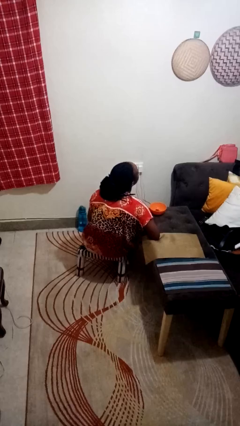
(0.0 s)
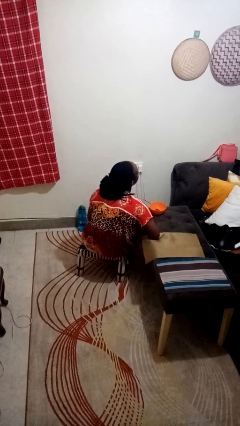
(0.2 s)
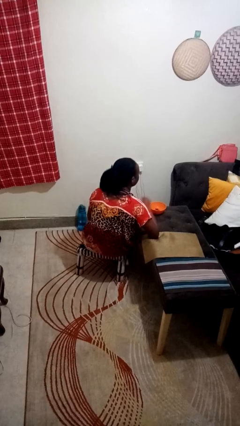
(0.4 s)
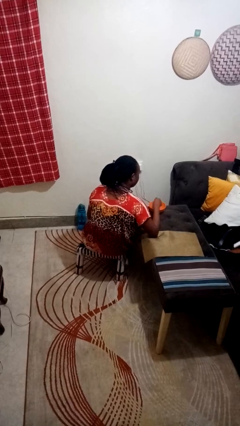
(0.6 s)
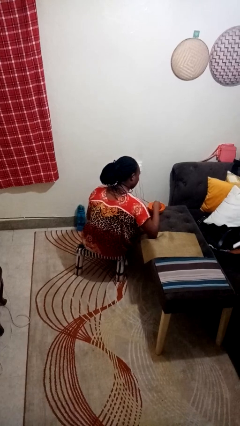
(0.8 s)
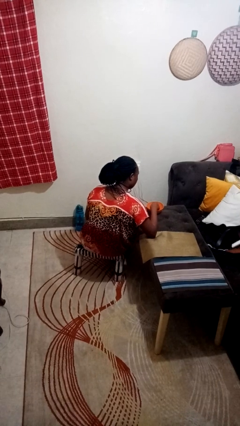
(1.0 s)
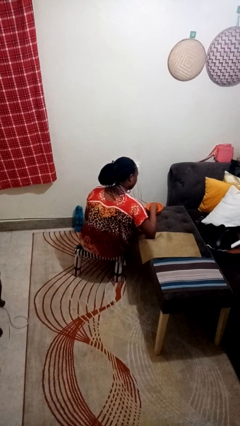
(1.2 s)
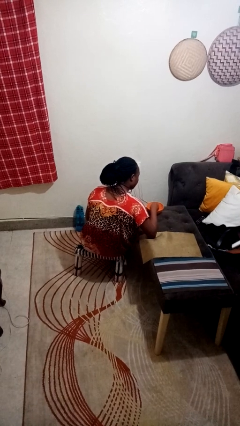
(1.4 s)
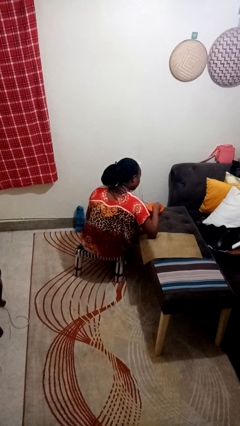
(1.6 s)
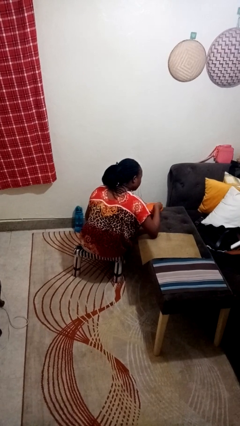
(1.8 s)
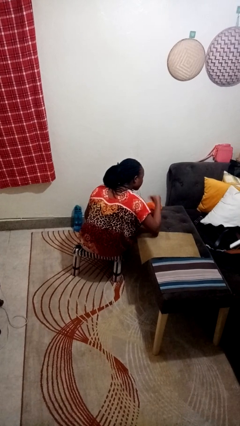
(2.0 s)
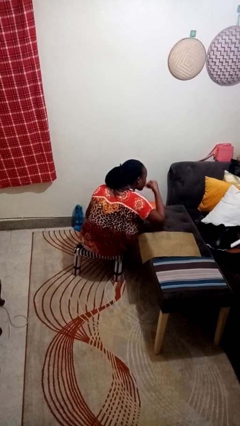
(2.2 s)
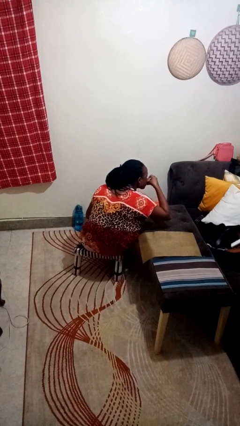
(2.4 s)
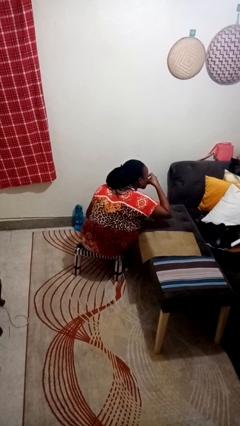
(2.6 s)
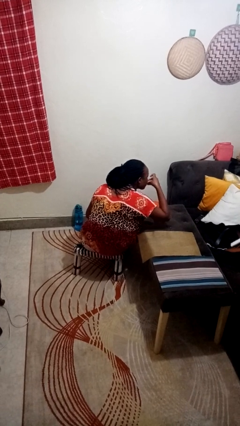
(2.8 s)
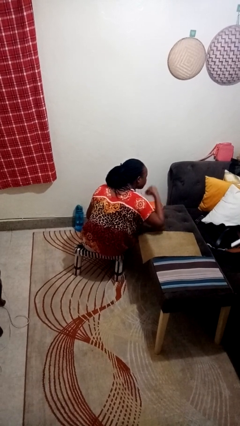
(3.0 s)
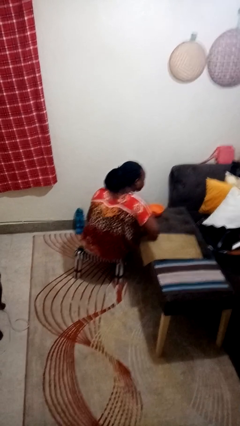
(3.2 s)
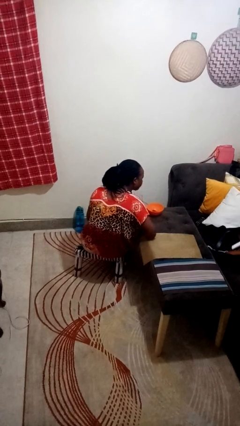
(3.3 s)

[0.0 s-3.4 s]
person eats with hands

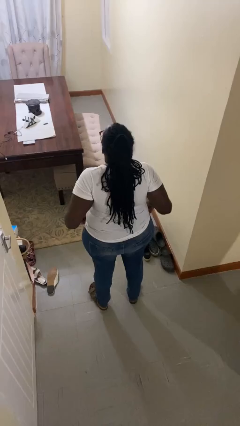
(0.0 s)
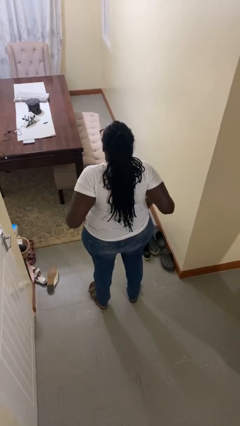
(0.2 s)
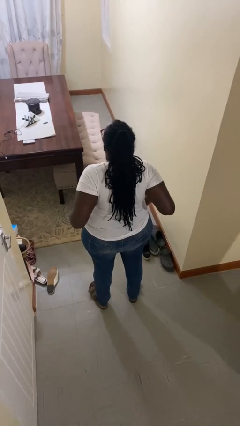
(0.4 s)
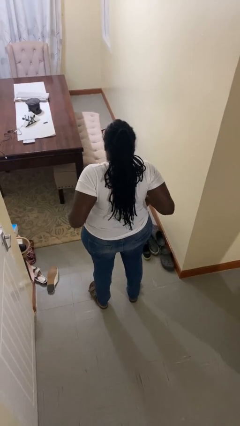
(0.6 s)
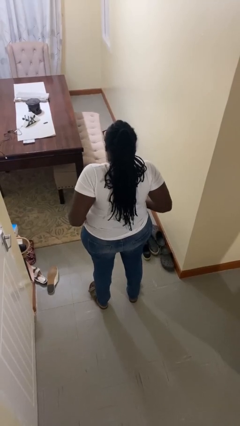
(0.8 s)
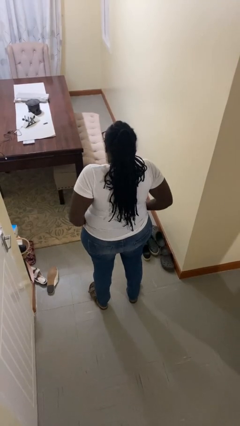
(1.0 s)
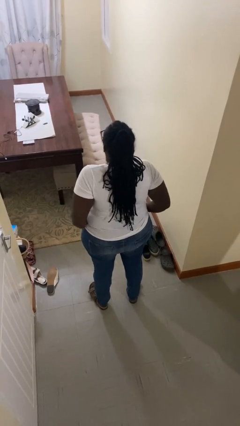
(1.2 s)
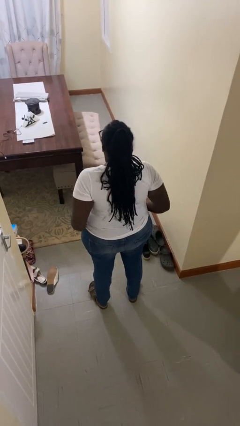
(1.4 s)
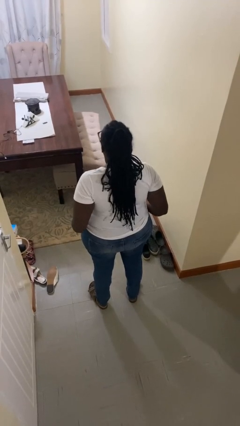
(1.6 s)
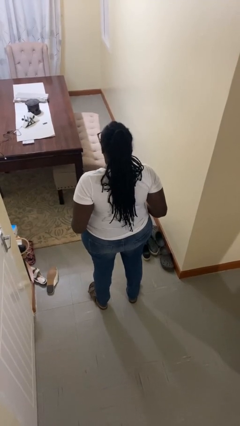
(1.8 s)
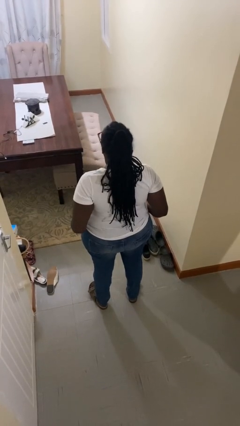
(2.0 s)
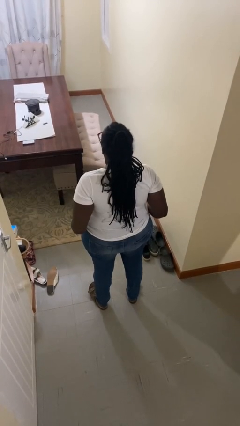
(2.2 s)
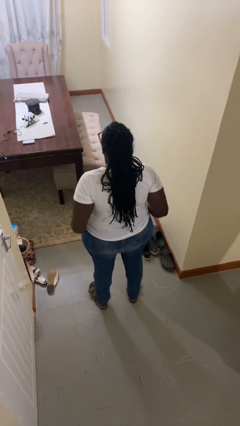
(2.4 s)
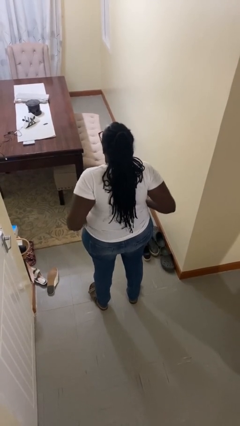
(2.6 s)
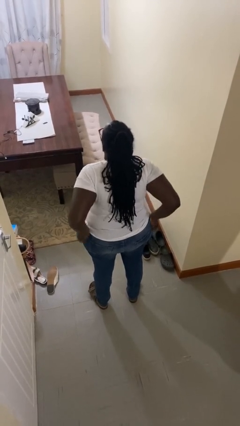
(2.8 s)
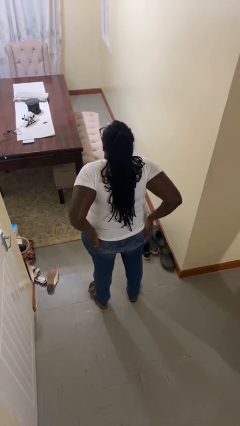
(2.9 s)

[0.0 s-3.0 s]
person puts hands in back pockets

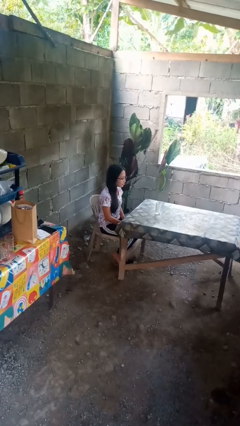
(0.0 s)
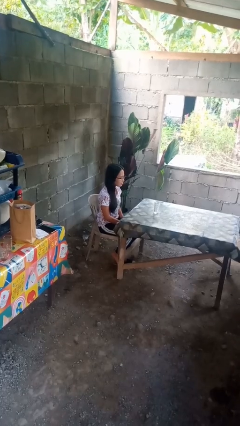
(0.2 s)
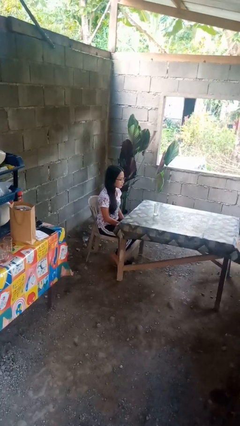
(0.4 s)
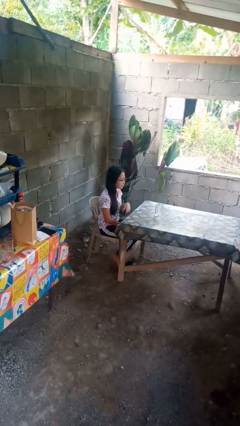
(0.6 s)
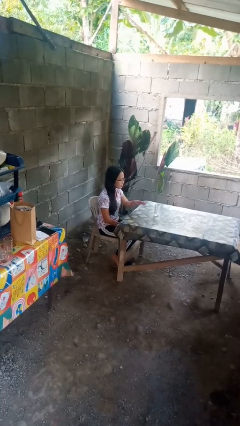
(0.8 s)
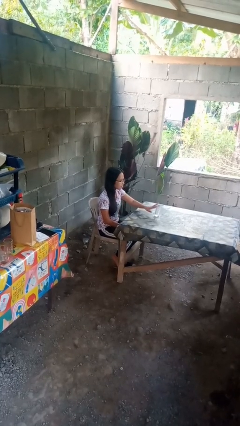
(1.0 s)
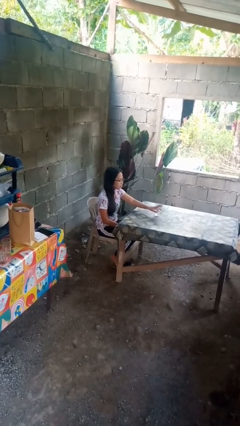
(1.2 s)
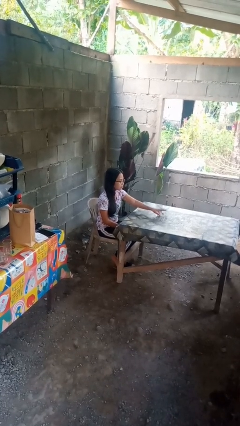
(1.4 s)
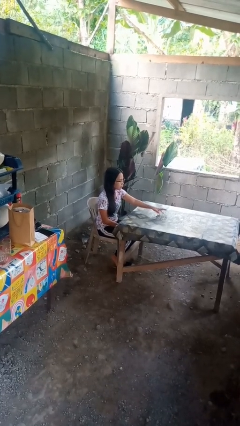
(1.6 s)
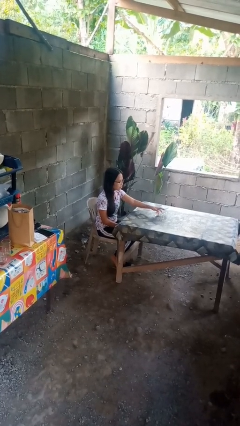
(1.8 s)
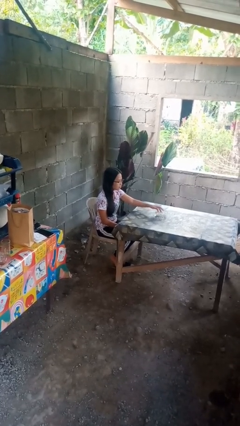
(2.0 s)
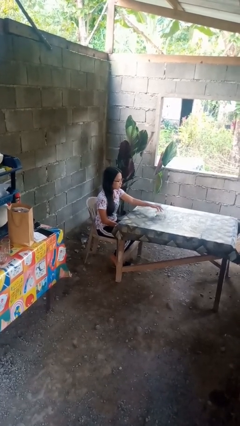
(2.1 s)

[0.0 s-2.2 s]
person knocks over glass

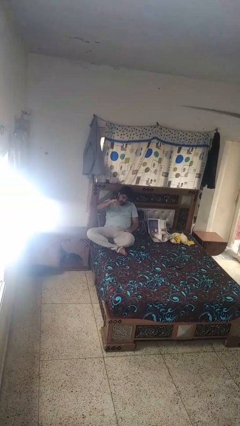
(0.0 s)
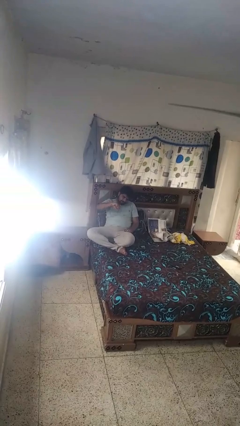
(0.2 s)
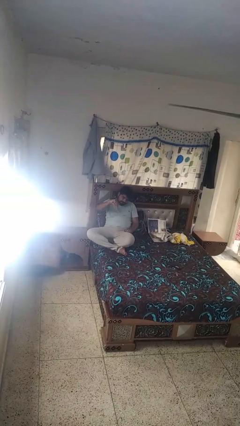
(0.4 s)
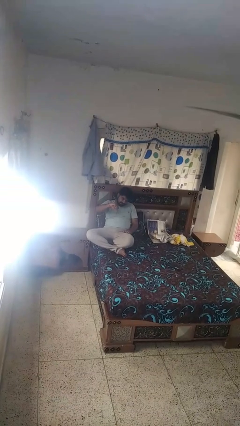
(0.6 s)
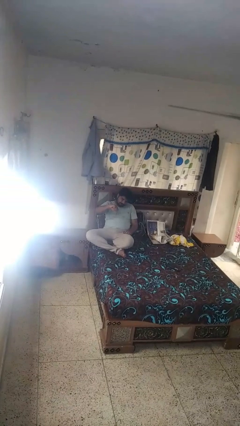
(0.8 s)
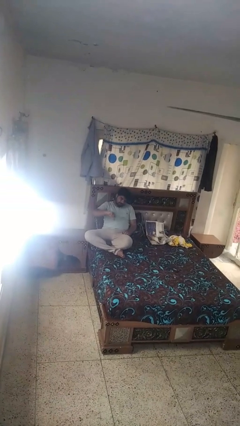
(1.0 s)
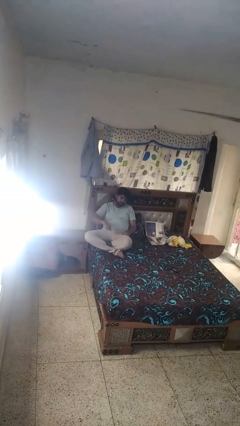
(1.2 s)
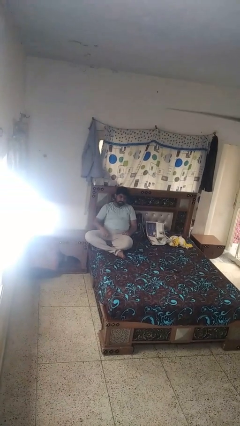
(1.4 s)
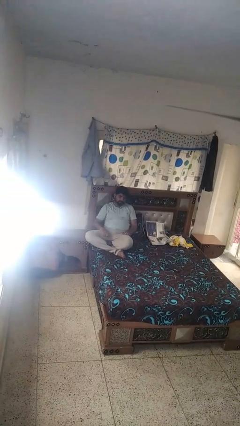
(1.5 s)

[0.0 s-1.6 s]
person gestures thumbs down

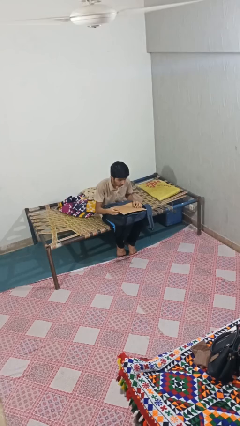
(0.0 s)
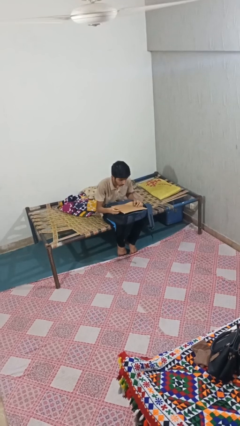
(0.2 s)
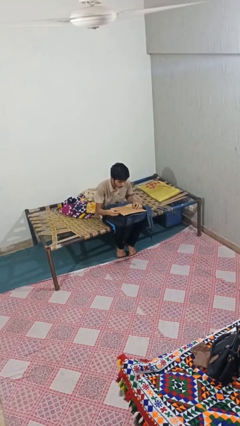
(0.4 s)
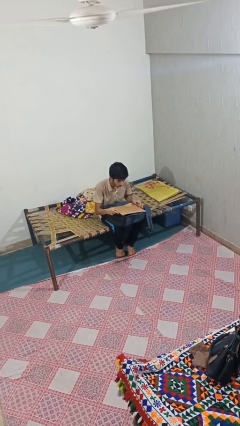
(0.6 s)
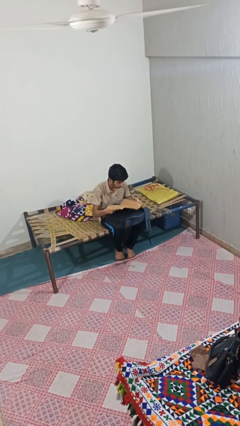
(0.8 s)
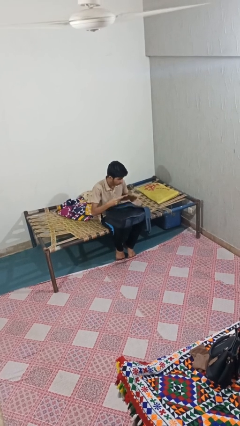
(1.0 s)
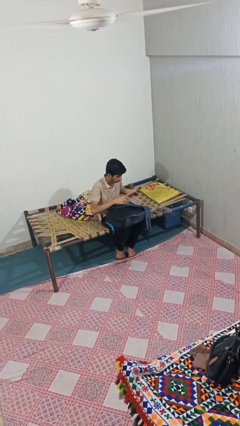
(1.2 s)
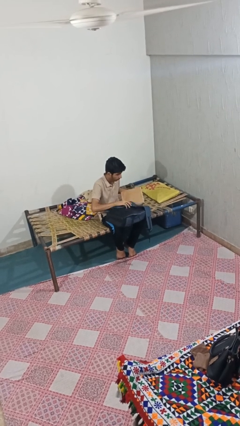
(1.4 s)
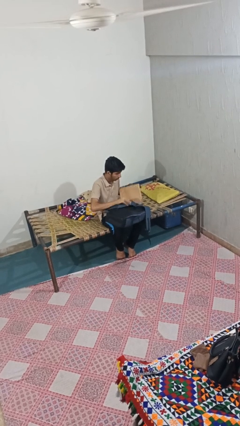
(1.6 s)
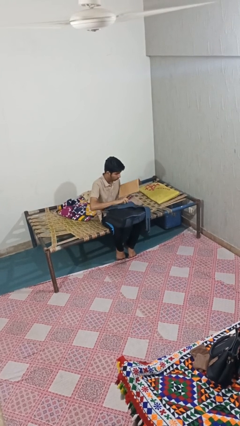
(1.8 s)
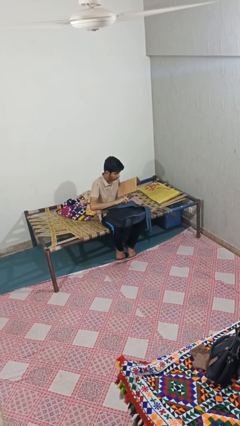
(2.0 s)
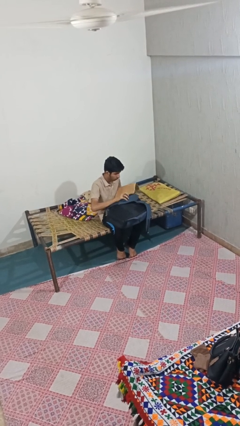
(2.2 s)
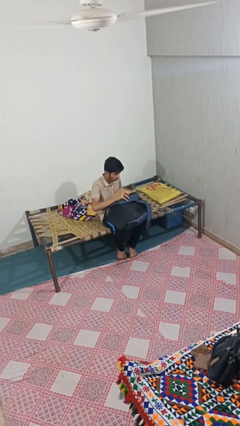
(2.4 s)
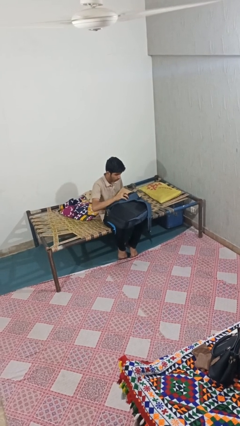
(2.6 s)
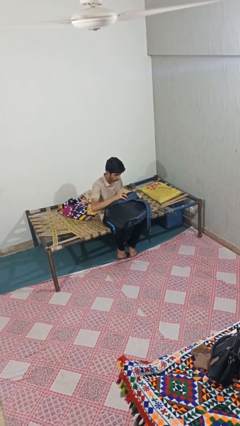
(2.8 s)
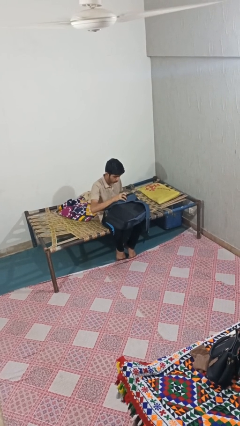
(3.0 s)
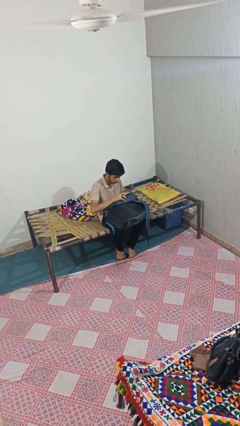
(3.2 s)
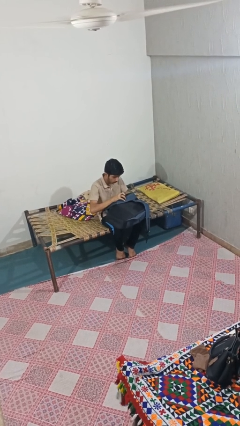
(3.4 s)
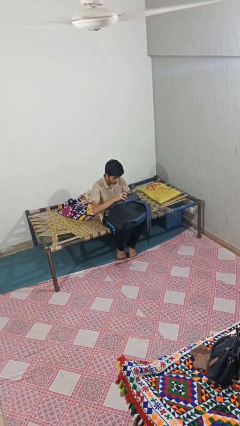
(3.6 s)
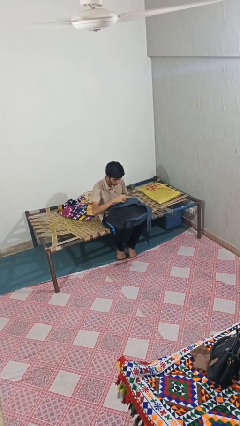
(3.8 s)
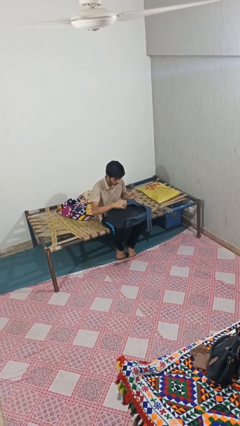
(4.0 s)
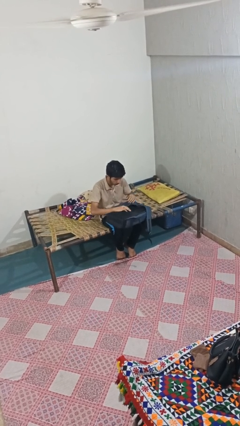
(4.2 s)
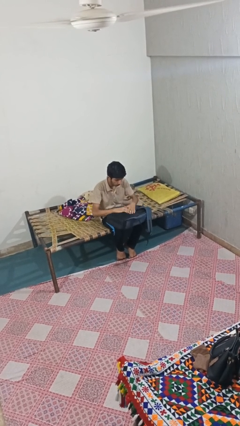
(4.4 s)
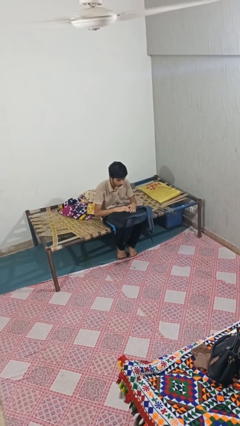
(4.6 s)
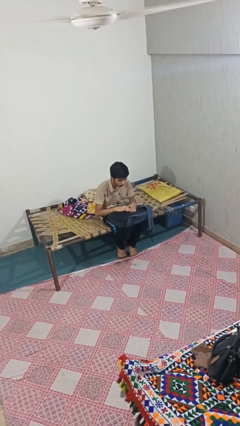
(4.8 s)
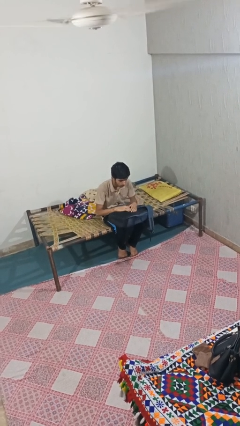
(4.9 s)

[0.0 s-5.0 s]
person puts object into backpack

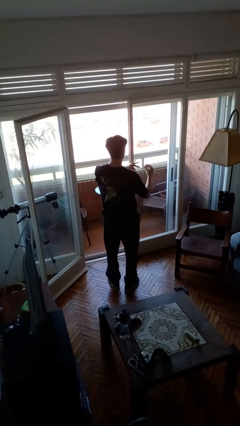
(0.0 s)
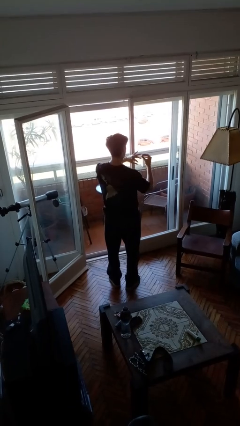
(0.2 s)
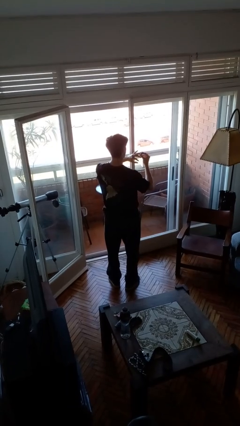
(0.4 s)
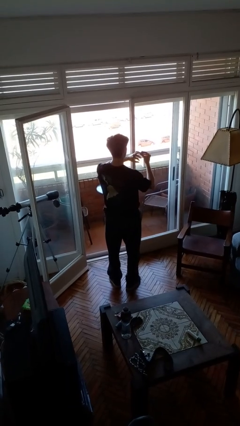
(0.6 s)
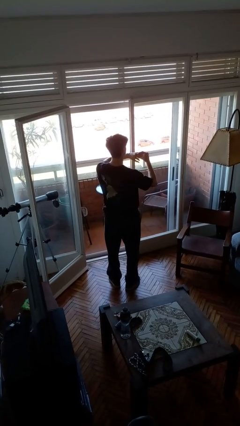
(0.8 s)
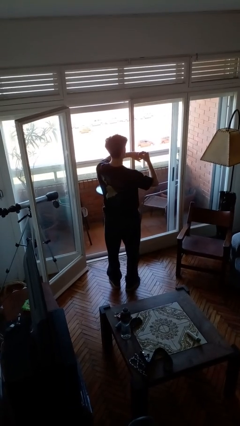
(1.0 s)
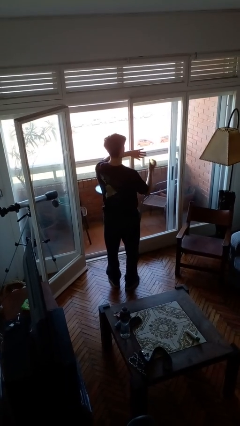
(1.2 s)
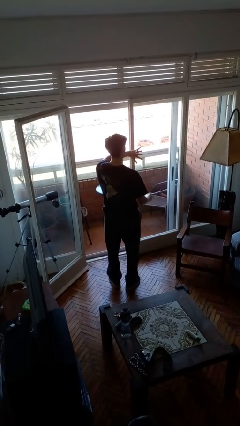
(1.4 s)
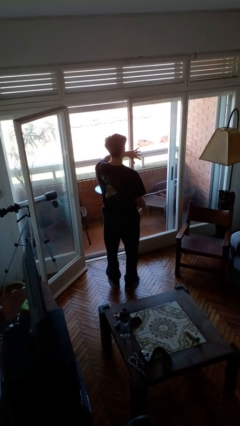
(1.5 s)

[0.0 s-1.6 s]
person puts on ring

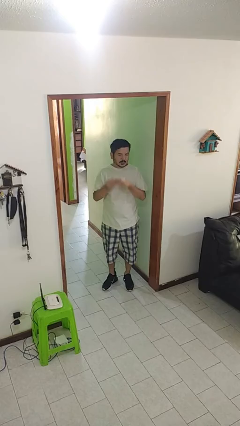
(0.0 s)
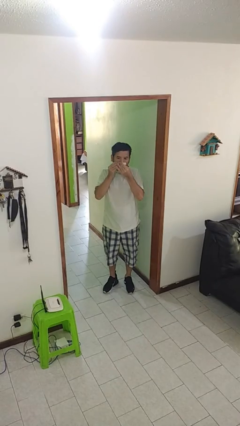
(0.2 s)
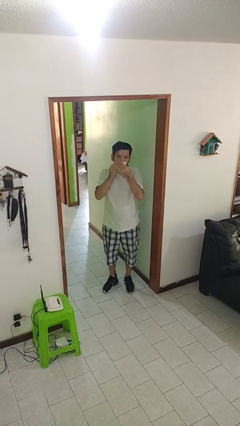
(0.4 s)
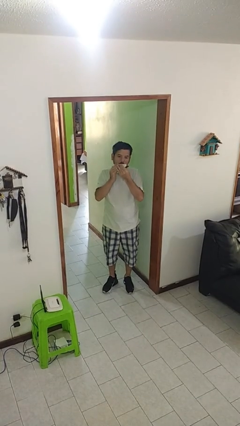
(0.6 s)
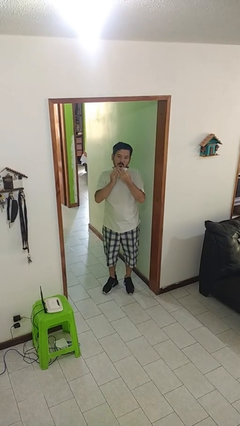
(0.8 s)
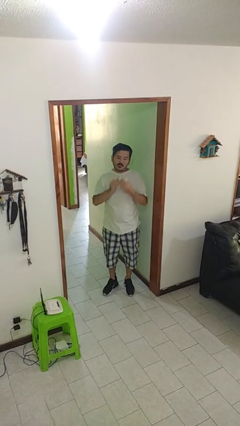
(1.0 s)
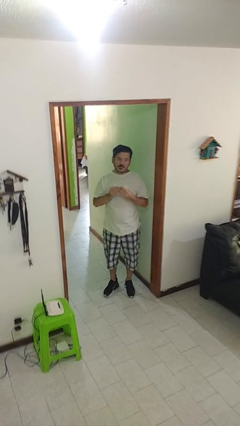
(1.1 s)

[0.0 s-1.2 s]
person wipes mouth with napkin
